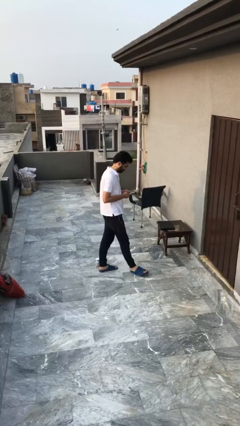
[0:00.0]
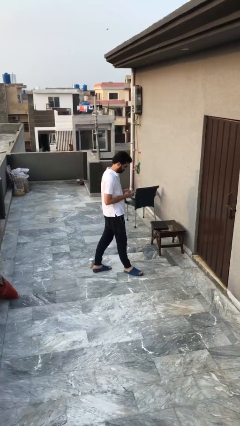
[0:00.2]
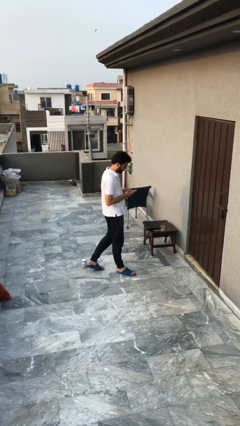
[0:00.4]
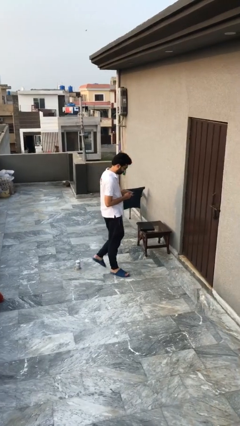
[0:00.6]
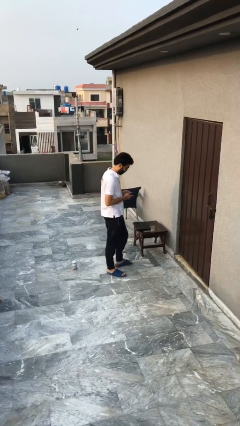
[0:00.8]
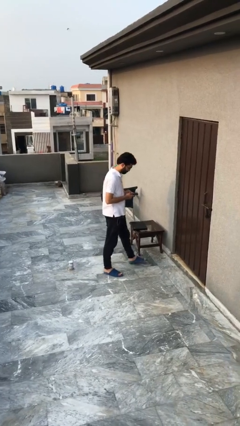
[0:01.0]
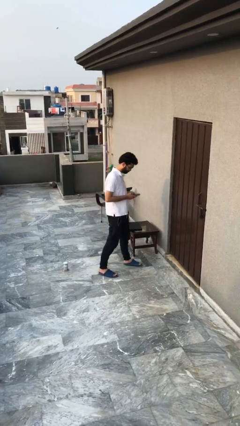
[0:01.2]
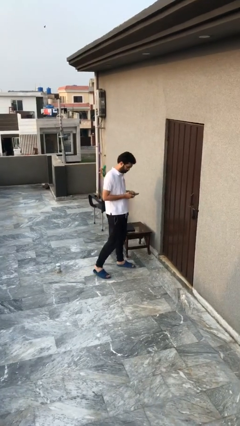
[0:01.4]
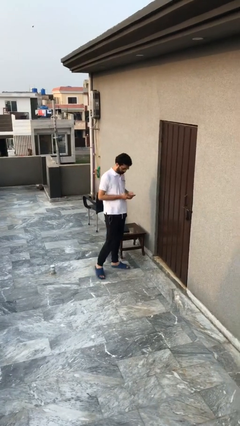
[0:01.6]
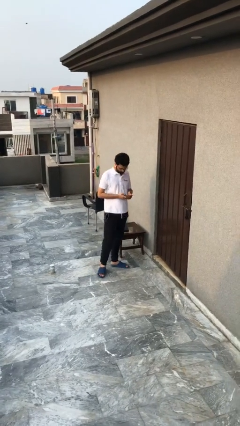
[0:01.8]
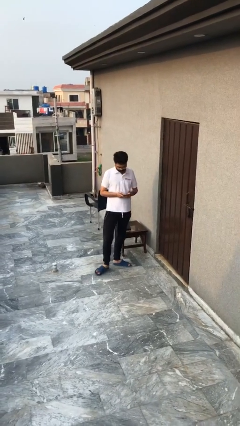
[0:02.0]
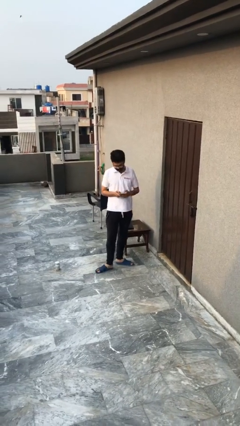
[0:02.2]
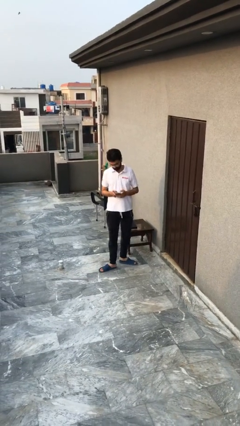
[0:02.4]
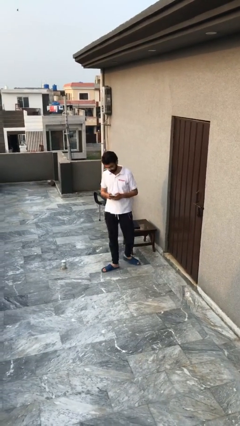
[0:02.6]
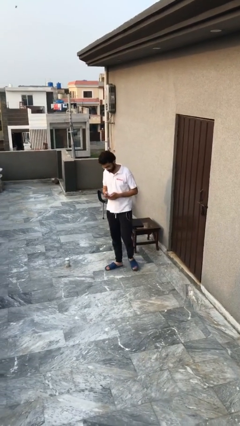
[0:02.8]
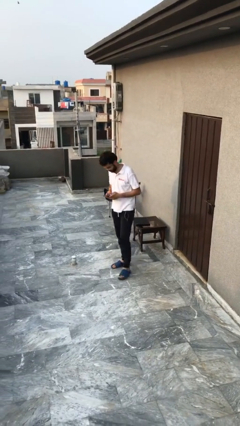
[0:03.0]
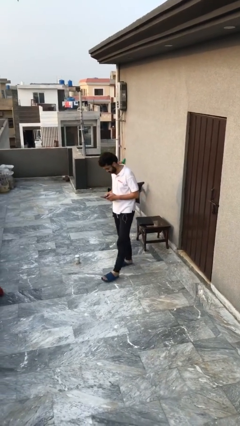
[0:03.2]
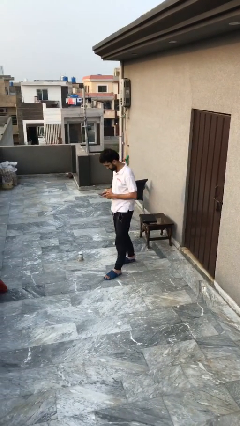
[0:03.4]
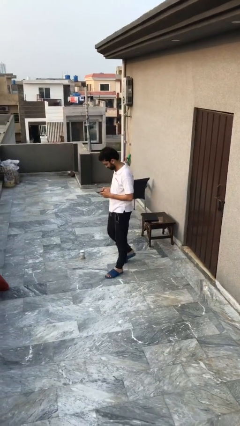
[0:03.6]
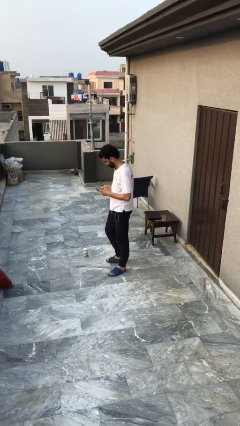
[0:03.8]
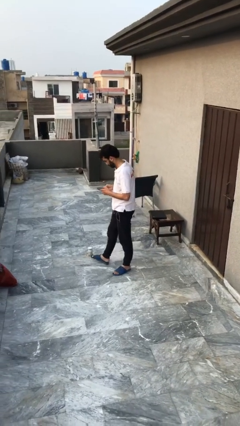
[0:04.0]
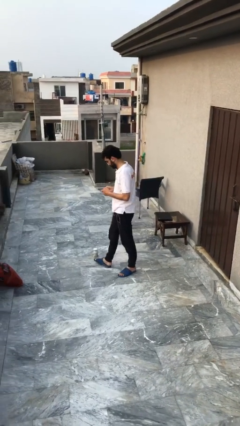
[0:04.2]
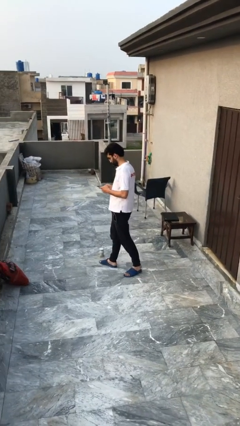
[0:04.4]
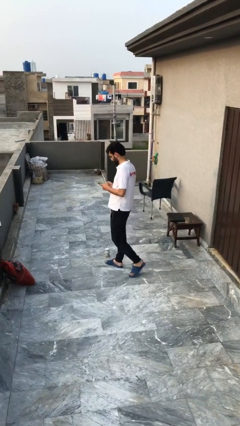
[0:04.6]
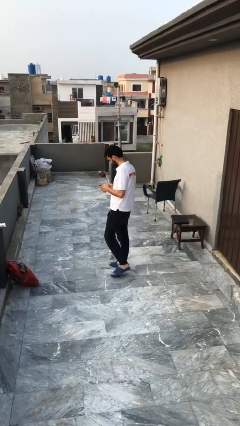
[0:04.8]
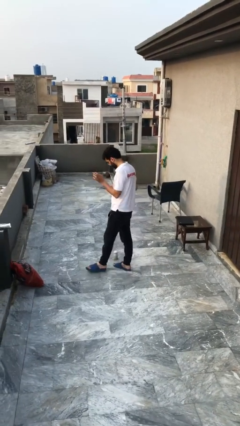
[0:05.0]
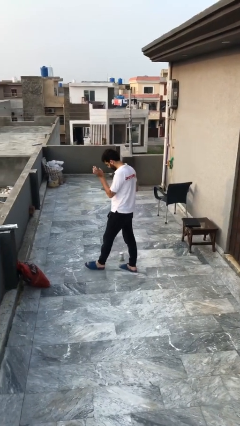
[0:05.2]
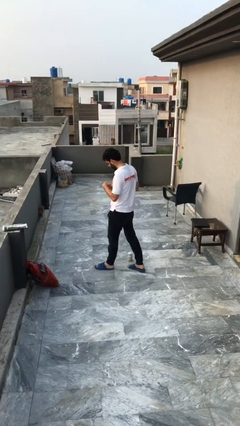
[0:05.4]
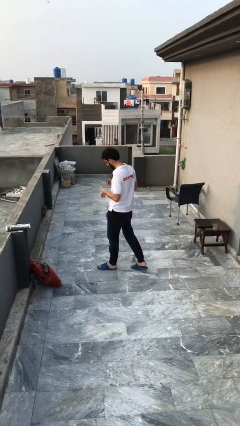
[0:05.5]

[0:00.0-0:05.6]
person texts on phone

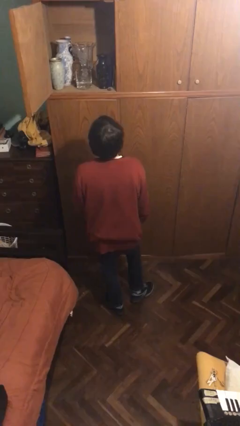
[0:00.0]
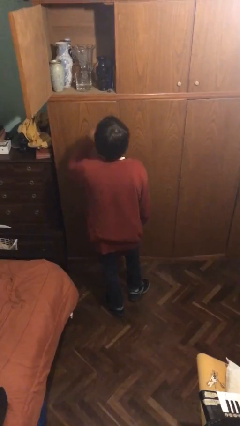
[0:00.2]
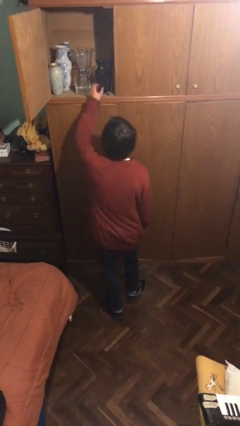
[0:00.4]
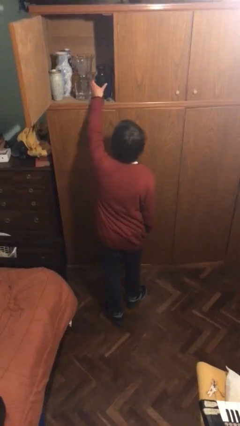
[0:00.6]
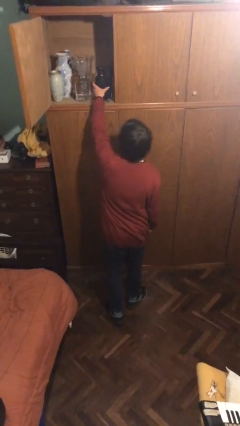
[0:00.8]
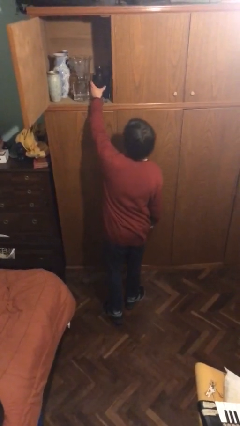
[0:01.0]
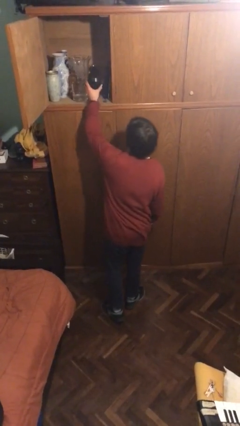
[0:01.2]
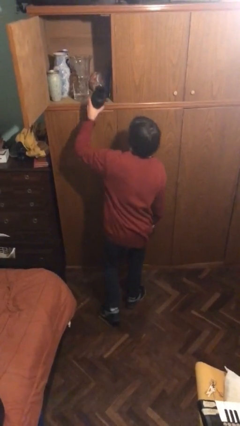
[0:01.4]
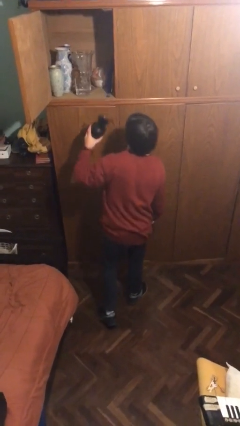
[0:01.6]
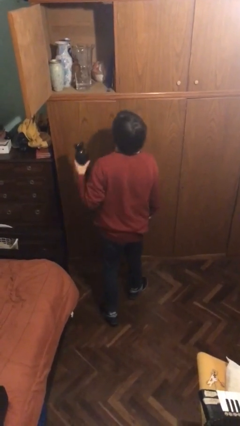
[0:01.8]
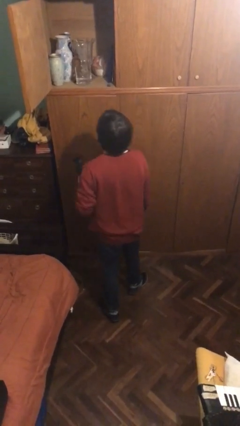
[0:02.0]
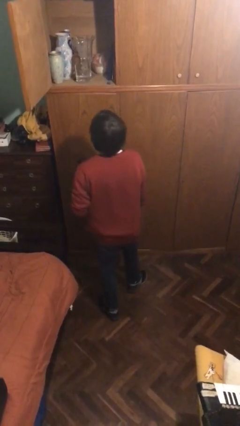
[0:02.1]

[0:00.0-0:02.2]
person picks up object from cabinet

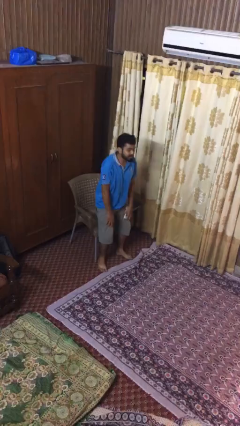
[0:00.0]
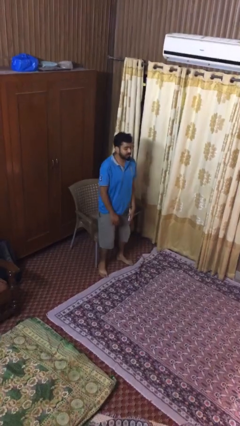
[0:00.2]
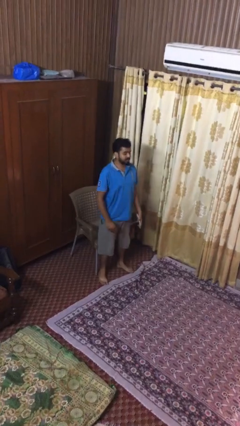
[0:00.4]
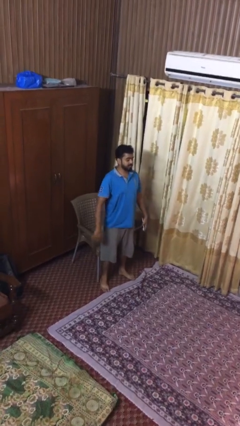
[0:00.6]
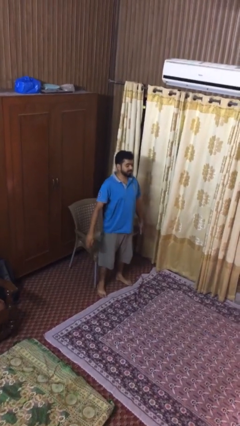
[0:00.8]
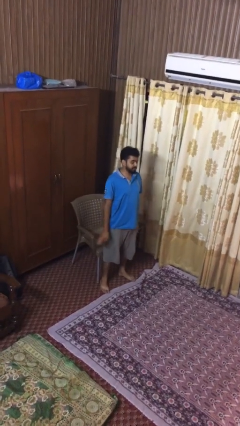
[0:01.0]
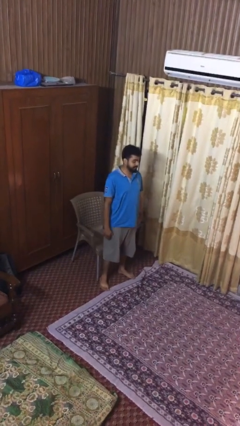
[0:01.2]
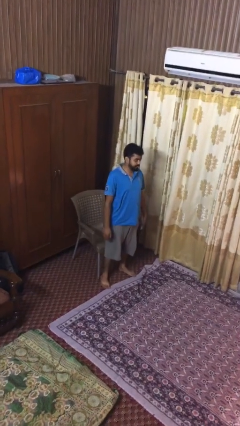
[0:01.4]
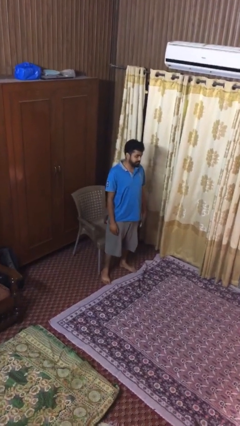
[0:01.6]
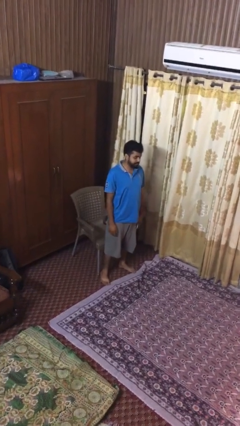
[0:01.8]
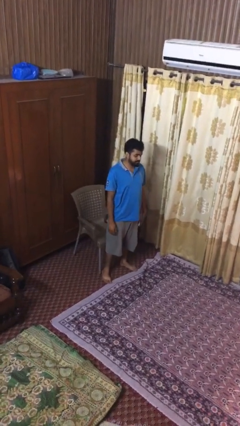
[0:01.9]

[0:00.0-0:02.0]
person stands up

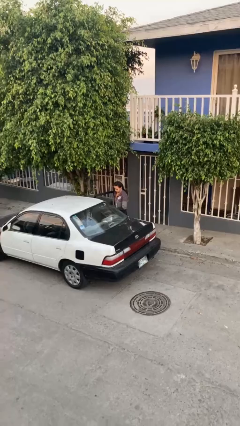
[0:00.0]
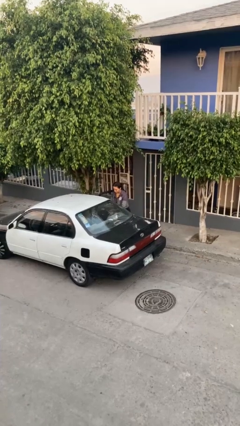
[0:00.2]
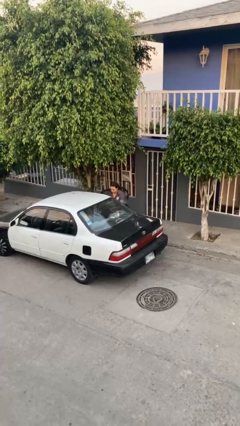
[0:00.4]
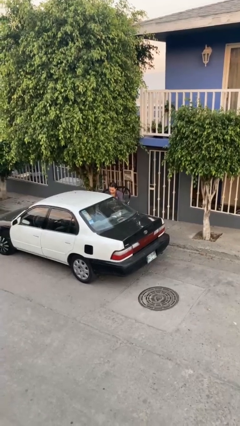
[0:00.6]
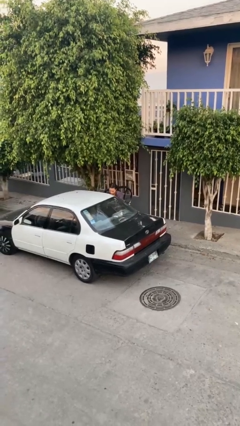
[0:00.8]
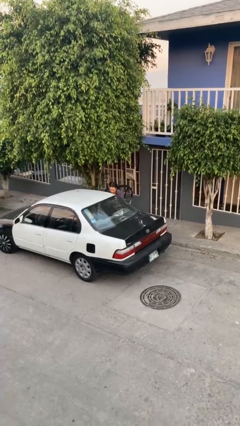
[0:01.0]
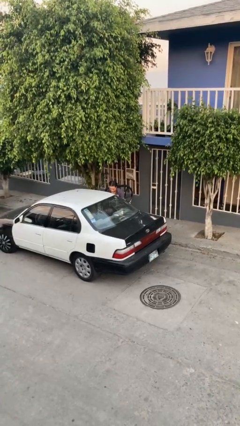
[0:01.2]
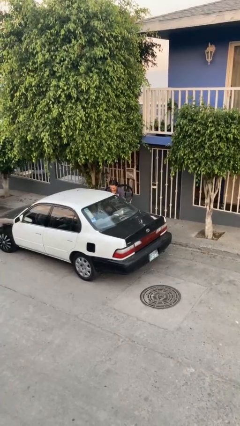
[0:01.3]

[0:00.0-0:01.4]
person loads car

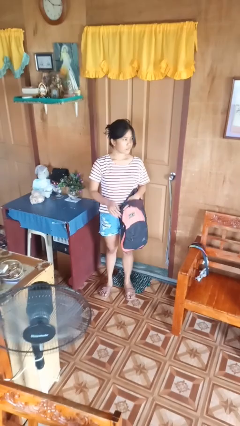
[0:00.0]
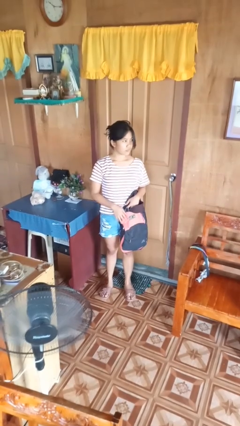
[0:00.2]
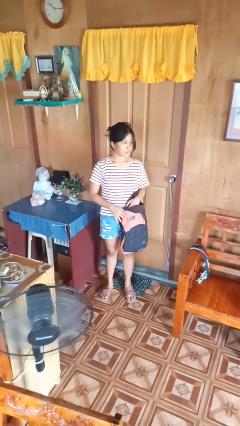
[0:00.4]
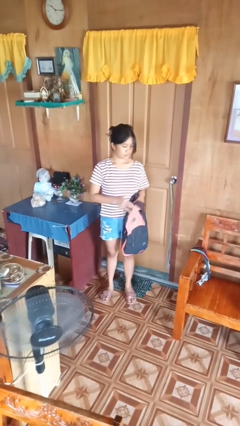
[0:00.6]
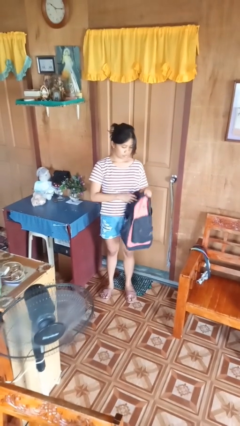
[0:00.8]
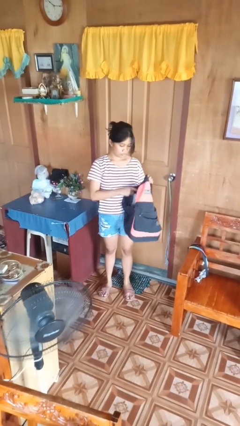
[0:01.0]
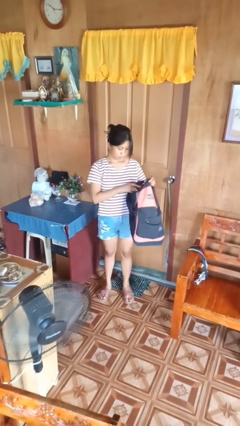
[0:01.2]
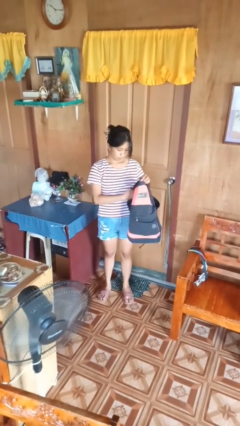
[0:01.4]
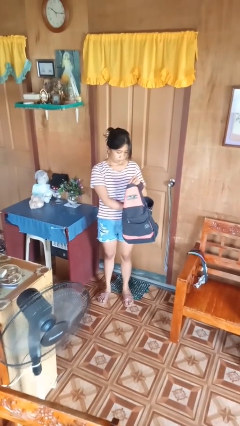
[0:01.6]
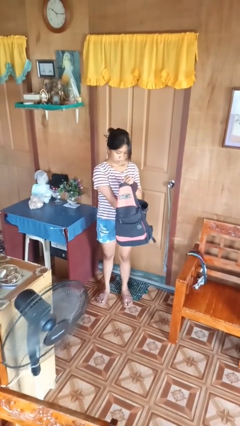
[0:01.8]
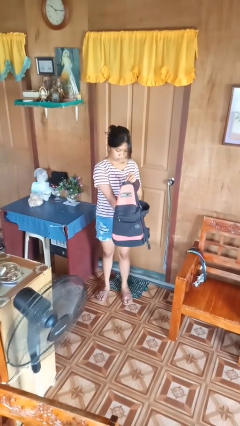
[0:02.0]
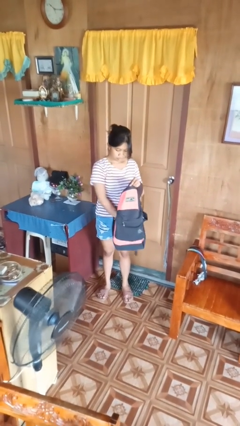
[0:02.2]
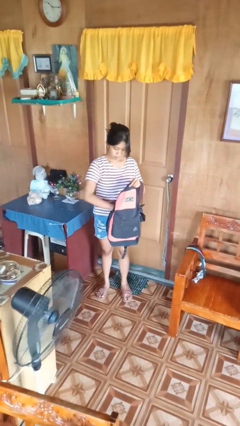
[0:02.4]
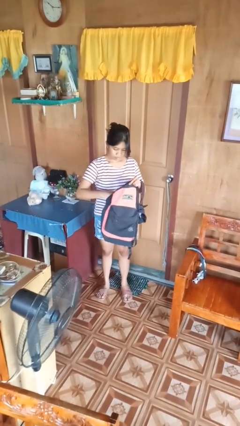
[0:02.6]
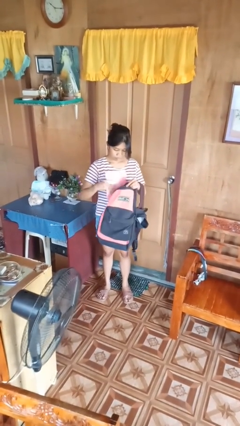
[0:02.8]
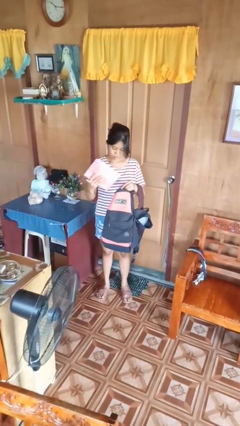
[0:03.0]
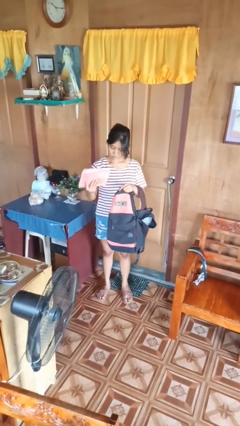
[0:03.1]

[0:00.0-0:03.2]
person searches in backpack

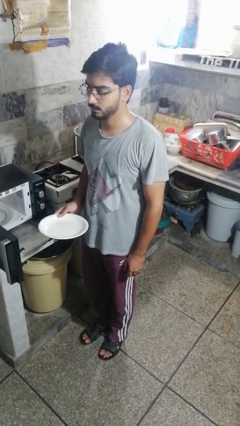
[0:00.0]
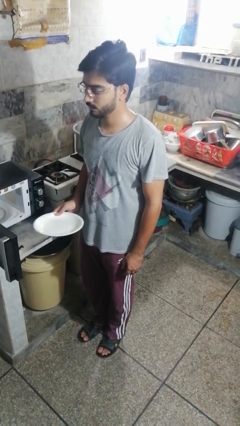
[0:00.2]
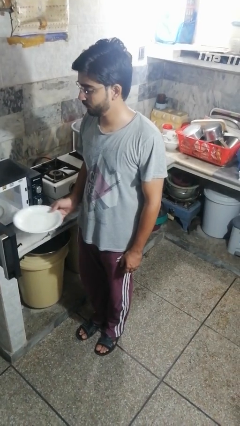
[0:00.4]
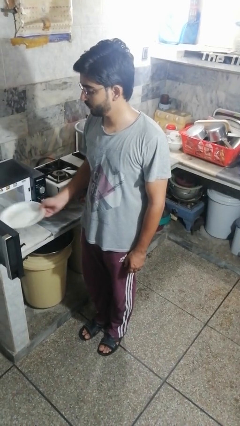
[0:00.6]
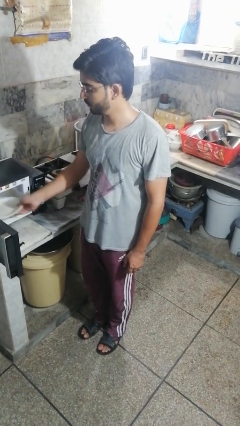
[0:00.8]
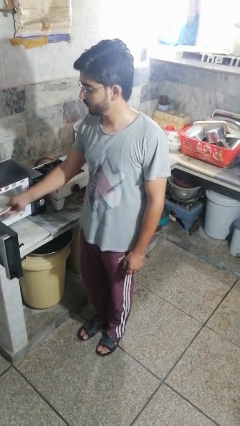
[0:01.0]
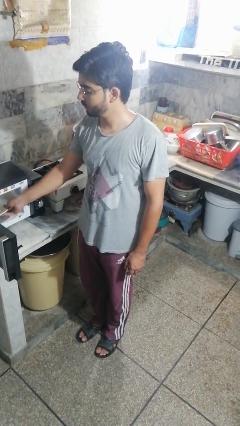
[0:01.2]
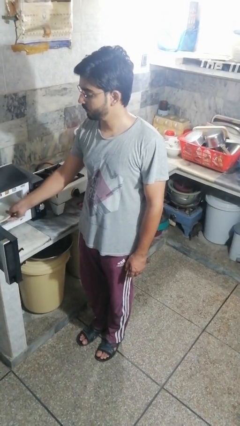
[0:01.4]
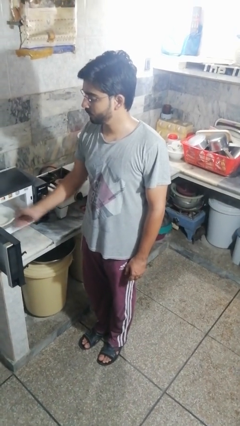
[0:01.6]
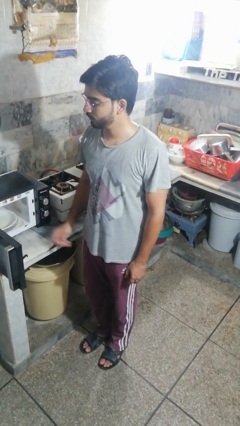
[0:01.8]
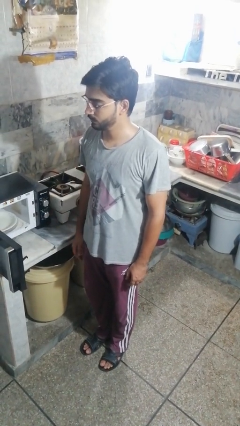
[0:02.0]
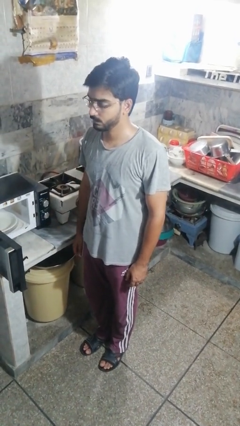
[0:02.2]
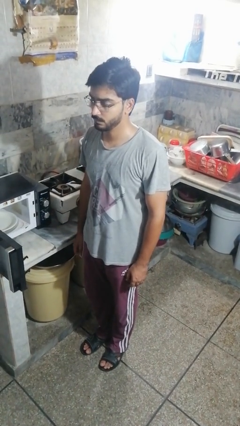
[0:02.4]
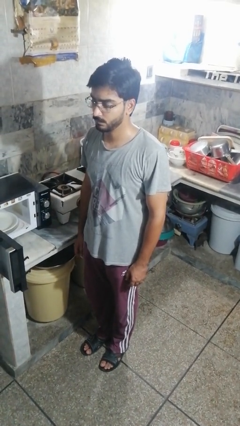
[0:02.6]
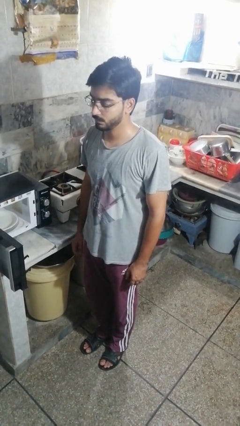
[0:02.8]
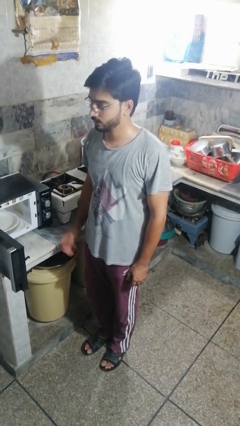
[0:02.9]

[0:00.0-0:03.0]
person puts object into oven

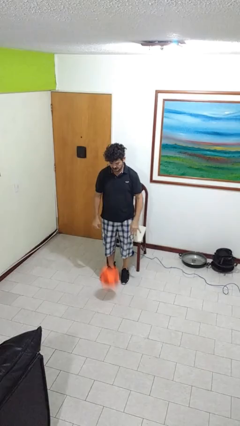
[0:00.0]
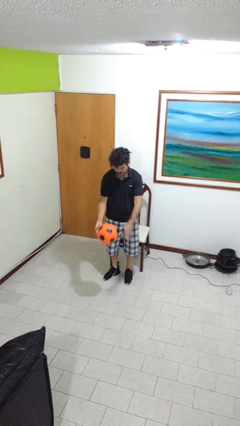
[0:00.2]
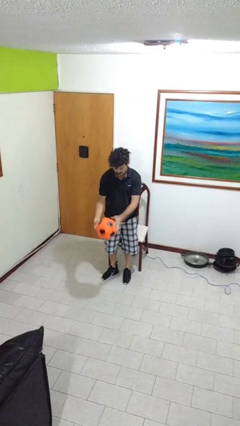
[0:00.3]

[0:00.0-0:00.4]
person bounces ball on floor
